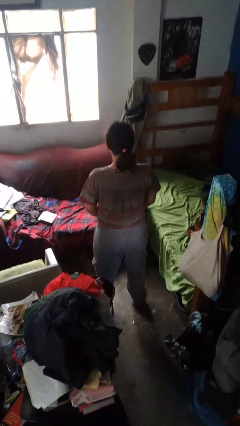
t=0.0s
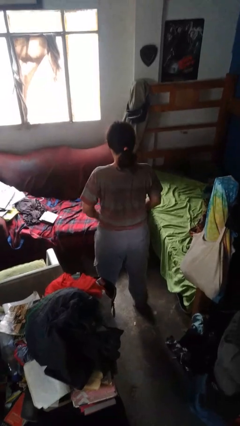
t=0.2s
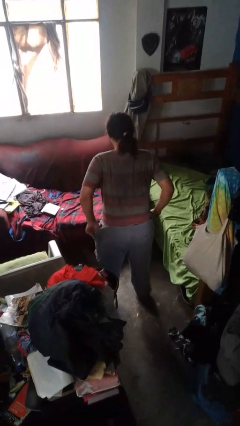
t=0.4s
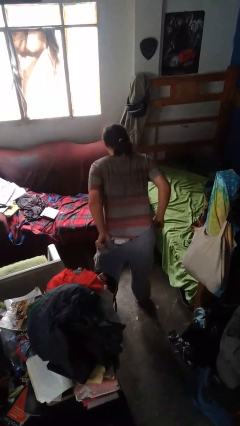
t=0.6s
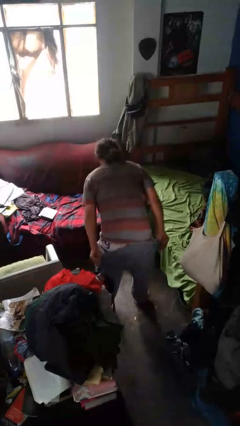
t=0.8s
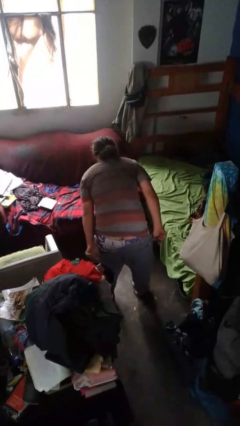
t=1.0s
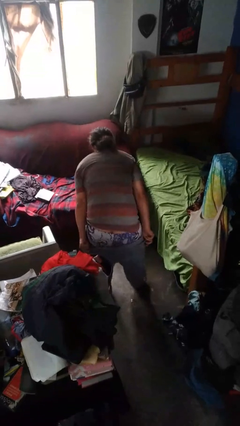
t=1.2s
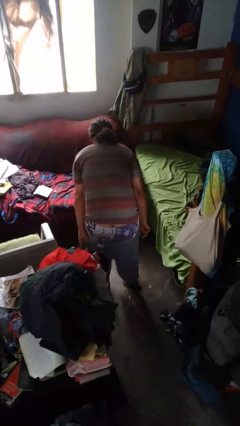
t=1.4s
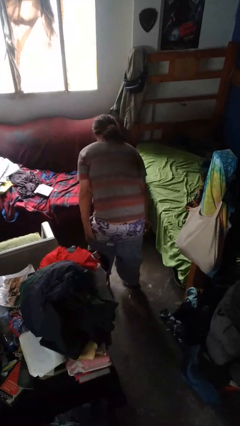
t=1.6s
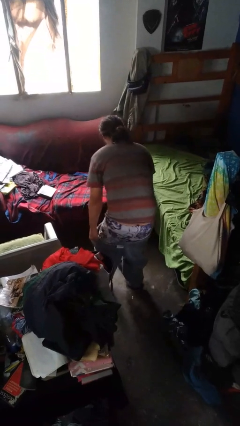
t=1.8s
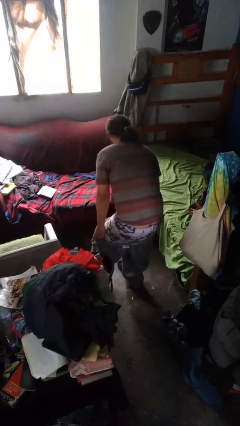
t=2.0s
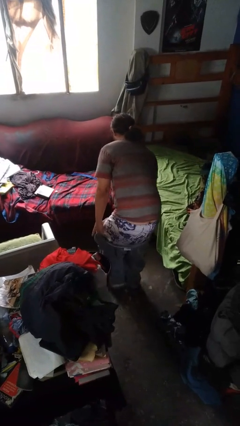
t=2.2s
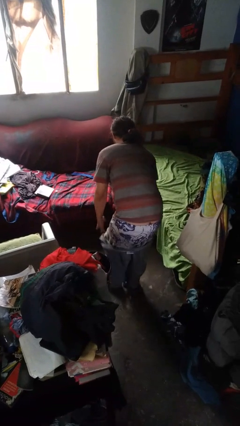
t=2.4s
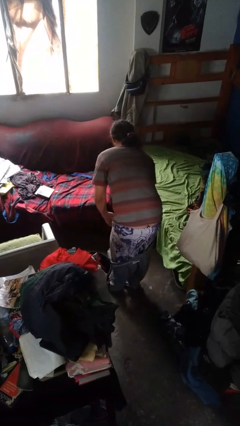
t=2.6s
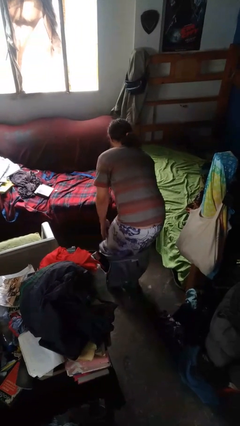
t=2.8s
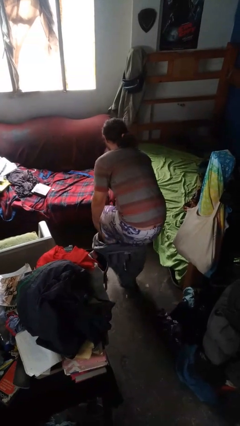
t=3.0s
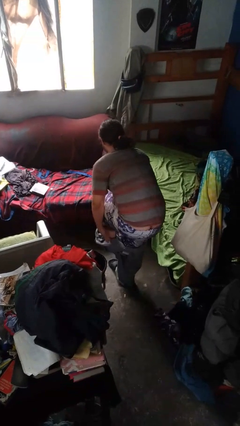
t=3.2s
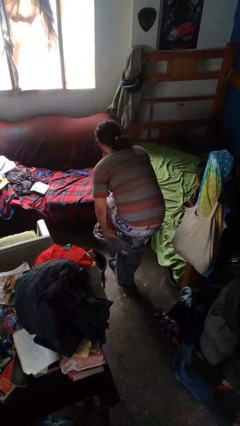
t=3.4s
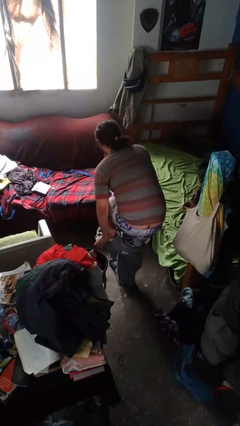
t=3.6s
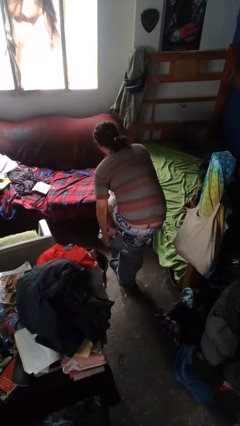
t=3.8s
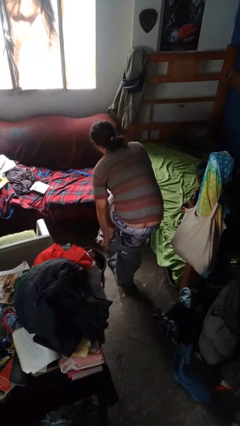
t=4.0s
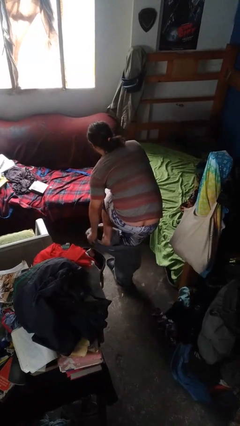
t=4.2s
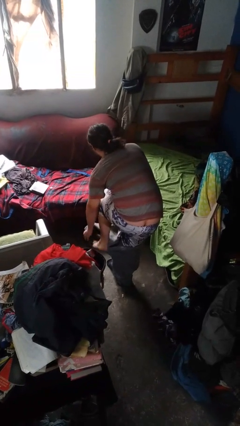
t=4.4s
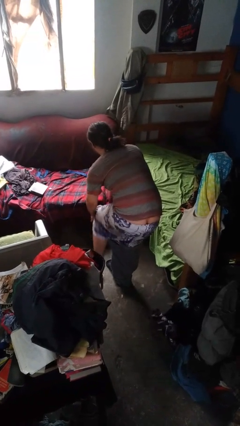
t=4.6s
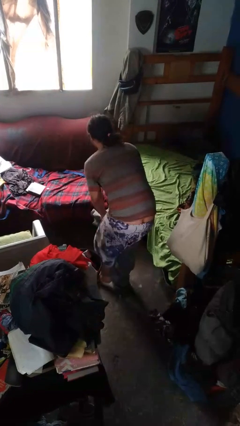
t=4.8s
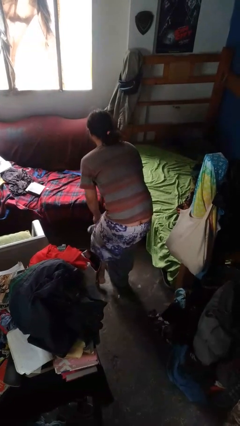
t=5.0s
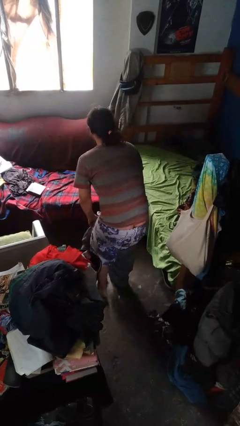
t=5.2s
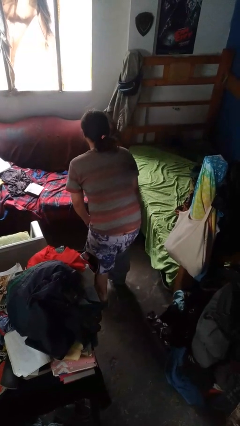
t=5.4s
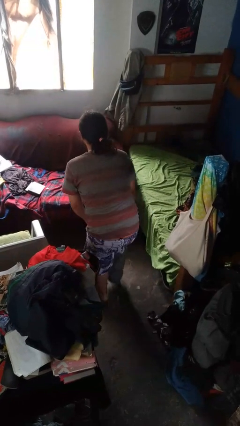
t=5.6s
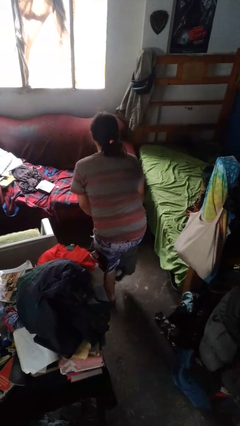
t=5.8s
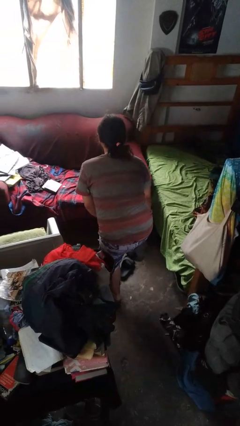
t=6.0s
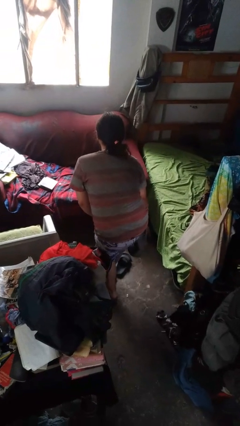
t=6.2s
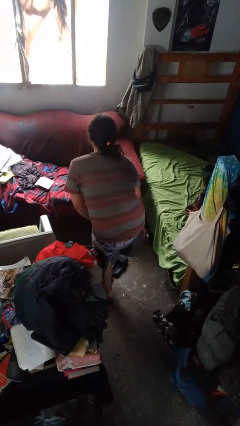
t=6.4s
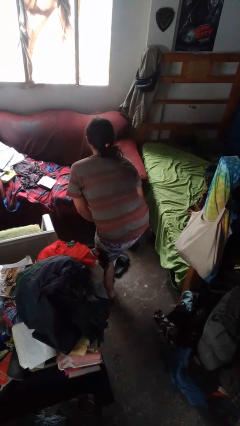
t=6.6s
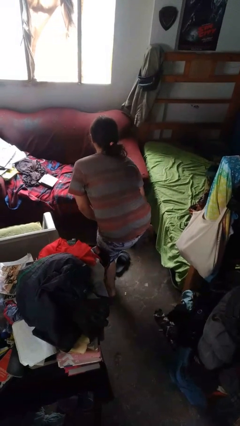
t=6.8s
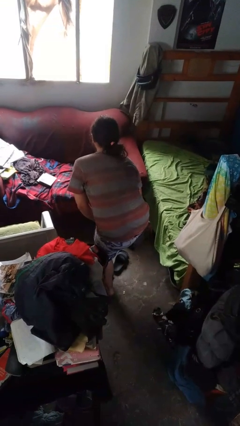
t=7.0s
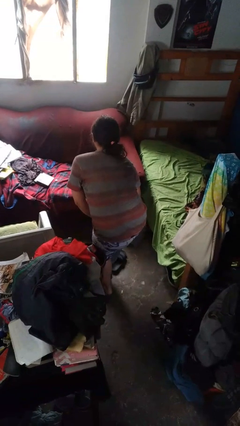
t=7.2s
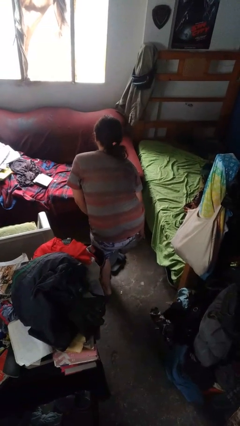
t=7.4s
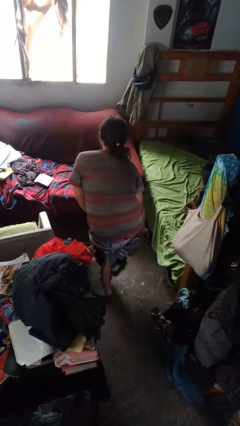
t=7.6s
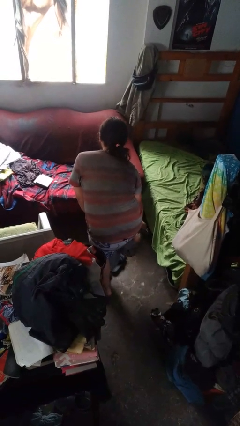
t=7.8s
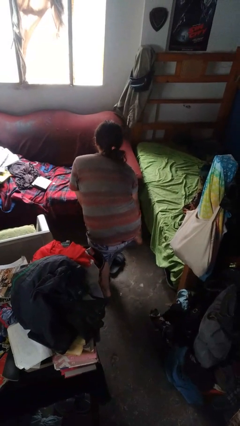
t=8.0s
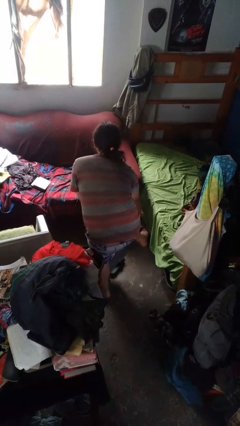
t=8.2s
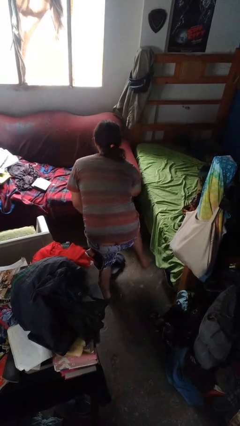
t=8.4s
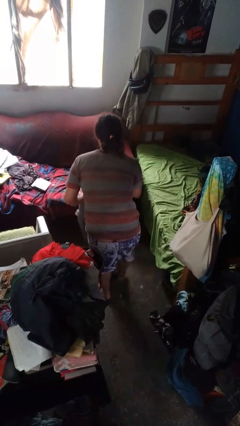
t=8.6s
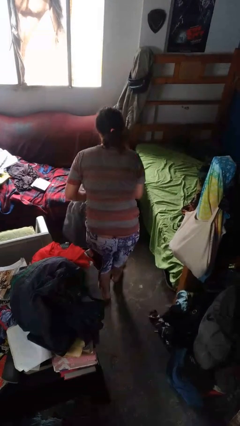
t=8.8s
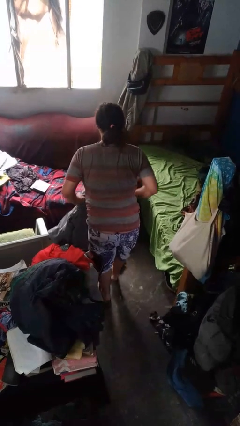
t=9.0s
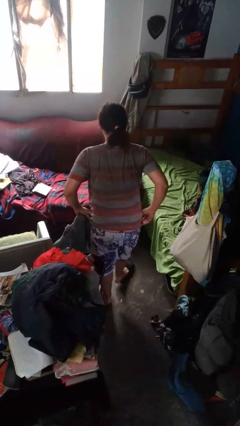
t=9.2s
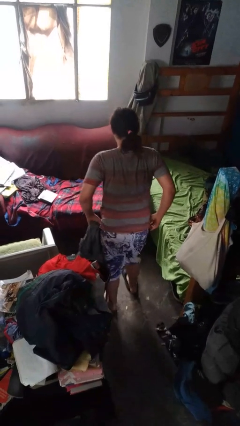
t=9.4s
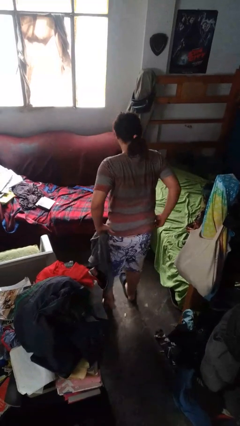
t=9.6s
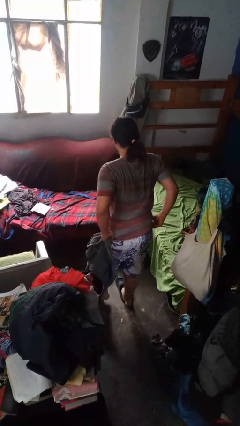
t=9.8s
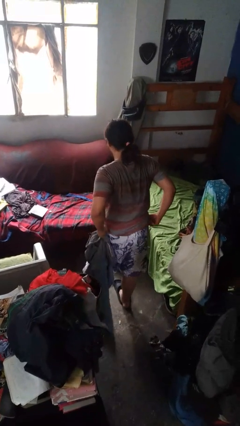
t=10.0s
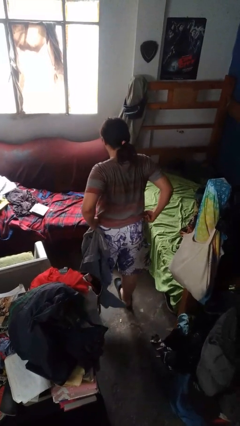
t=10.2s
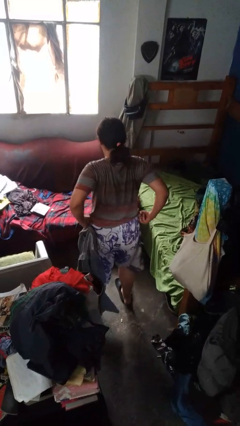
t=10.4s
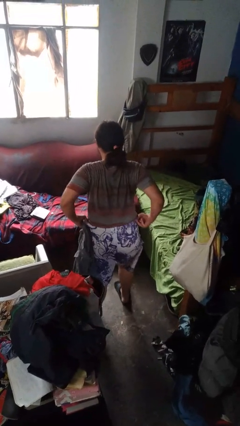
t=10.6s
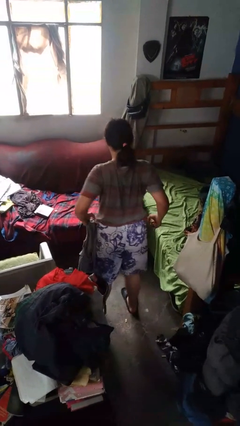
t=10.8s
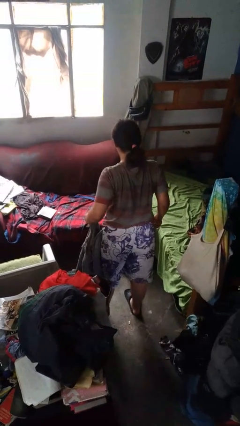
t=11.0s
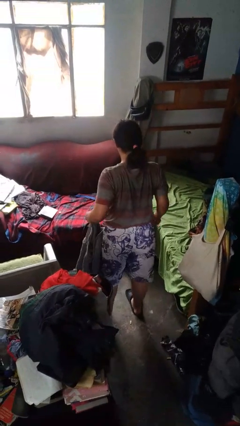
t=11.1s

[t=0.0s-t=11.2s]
person takes off pants

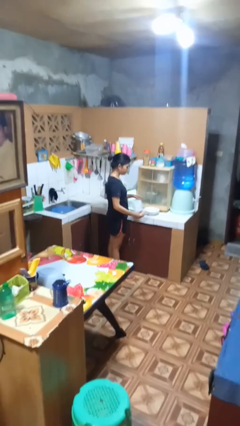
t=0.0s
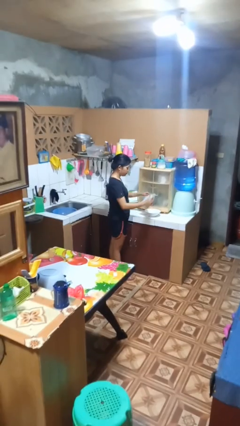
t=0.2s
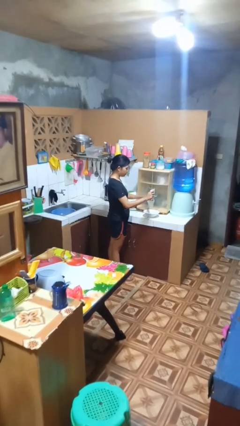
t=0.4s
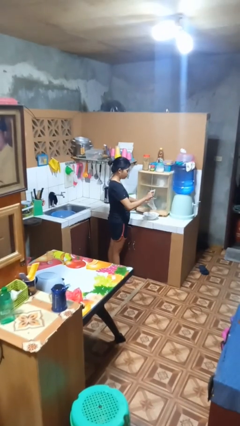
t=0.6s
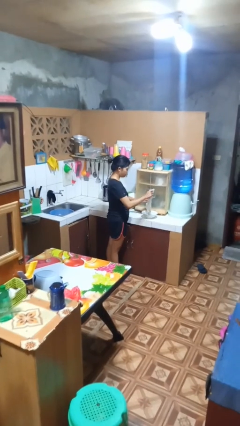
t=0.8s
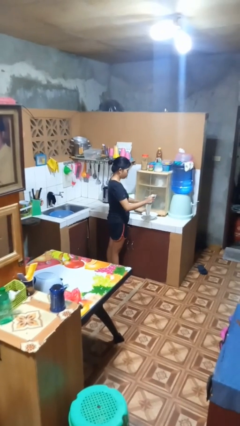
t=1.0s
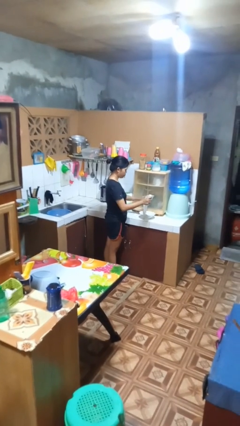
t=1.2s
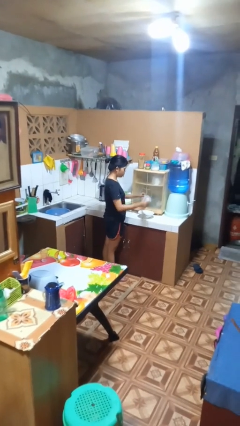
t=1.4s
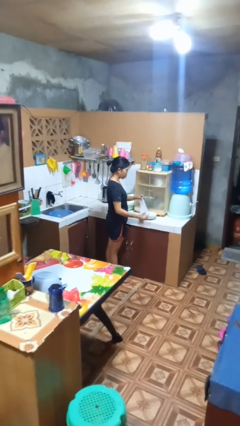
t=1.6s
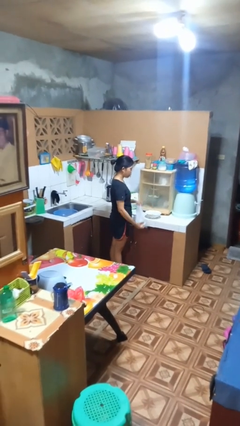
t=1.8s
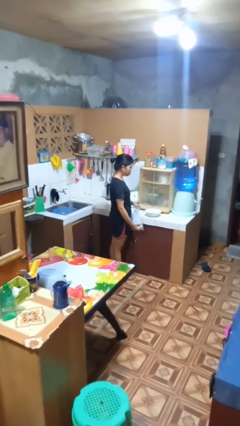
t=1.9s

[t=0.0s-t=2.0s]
person pours into bowl

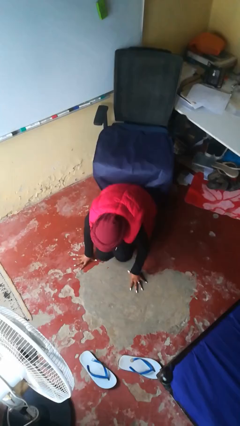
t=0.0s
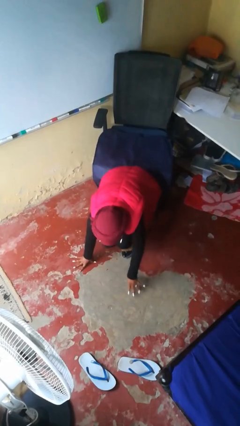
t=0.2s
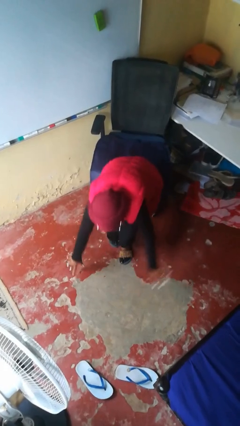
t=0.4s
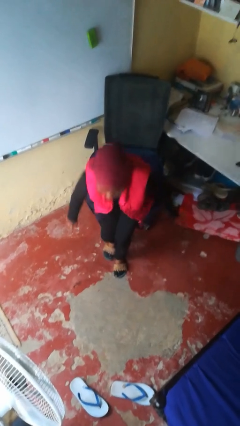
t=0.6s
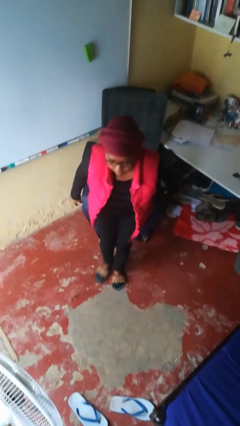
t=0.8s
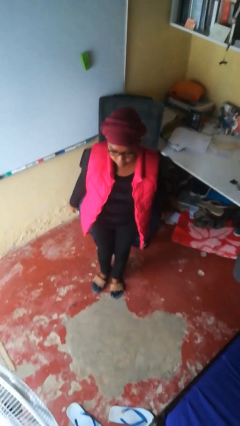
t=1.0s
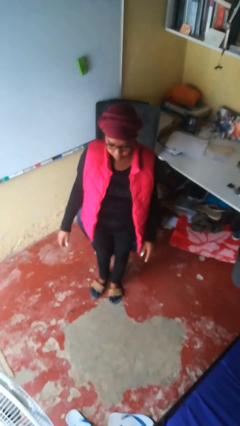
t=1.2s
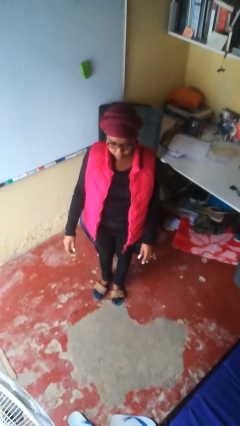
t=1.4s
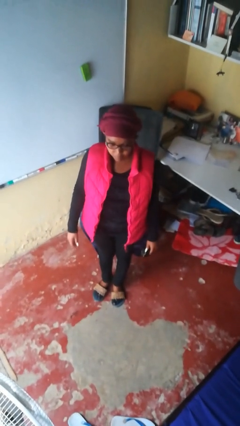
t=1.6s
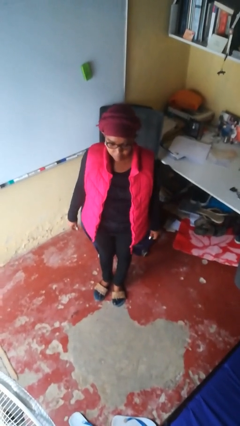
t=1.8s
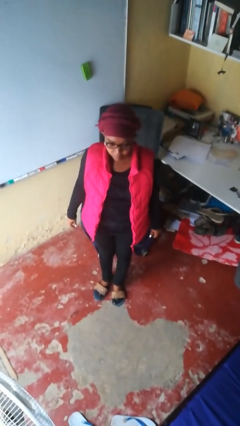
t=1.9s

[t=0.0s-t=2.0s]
person stands up from floor

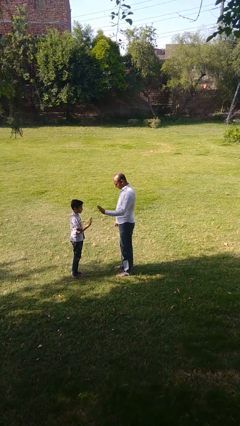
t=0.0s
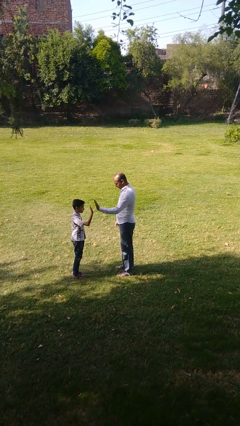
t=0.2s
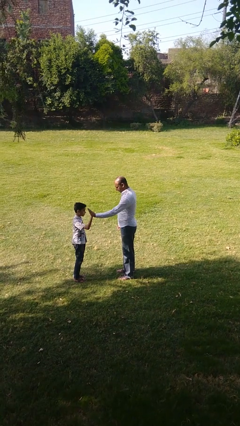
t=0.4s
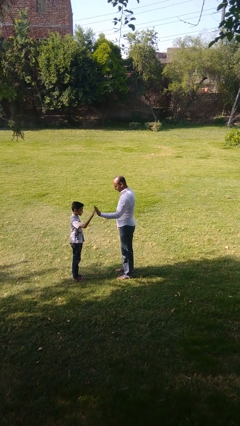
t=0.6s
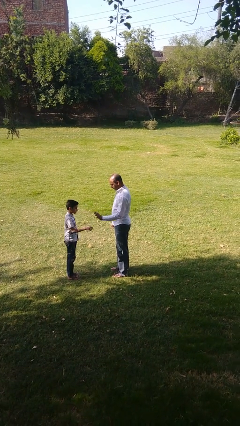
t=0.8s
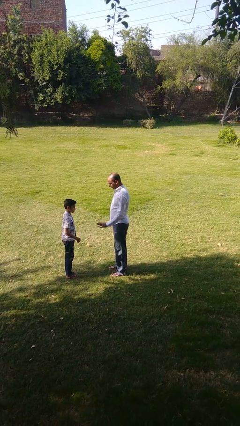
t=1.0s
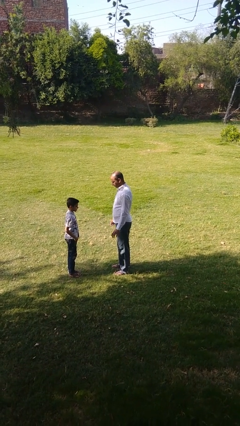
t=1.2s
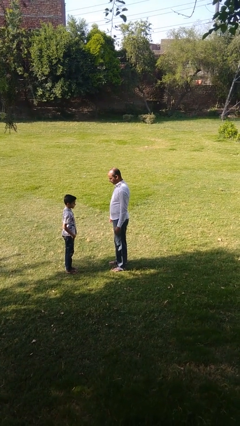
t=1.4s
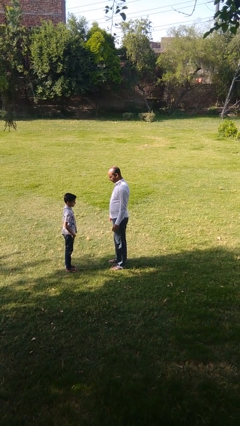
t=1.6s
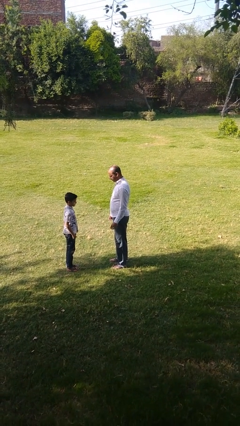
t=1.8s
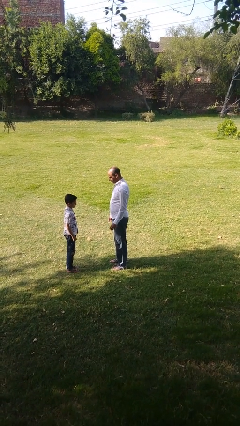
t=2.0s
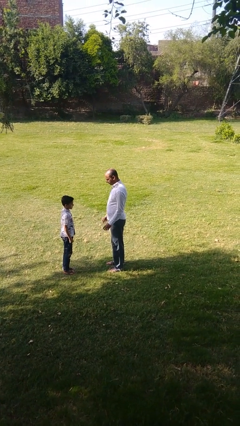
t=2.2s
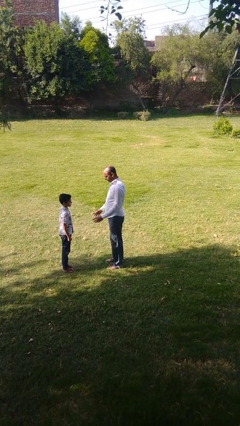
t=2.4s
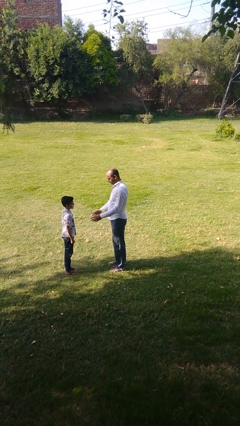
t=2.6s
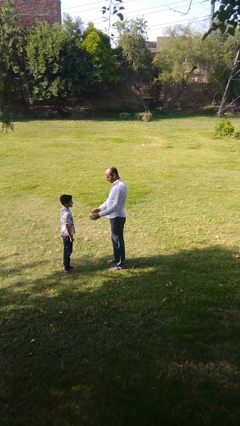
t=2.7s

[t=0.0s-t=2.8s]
person highfives hand
